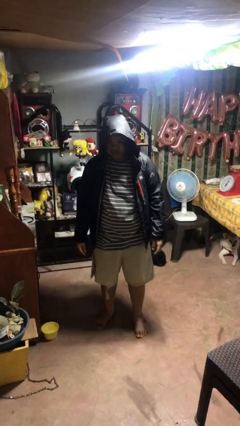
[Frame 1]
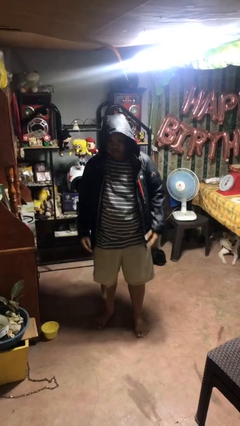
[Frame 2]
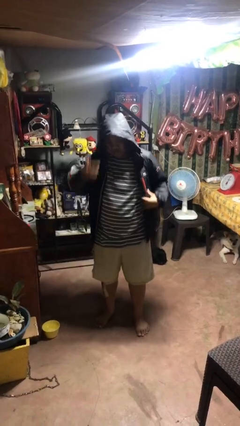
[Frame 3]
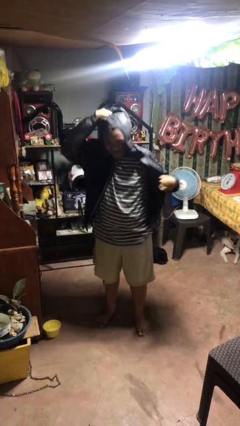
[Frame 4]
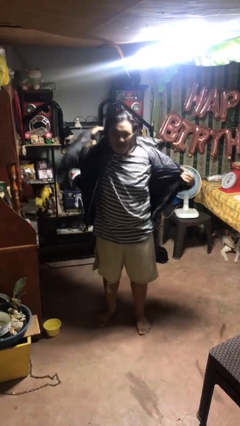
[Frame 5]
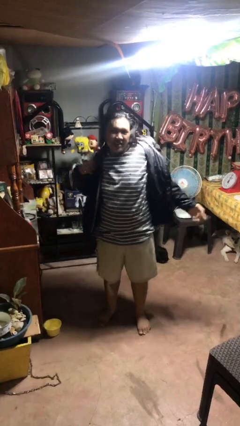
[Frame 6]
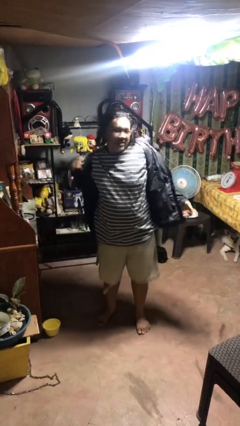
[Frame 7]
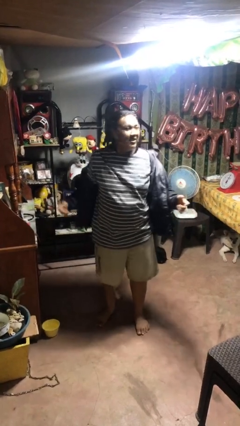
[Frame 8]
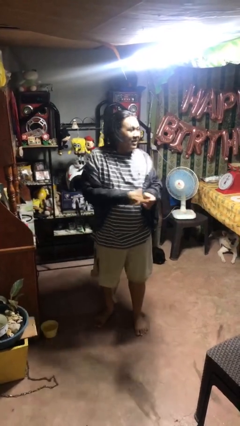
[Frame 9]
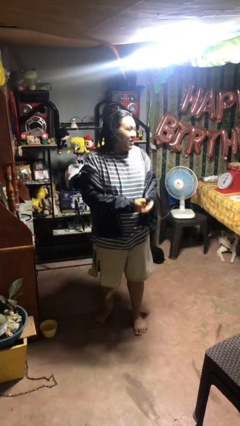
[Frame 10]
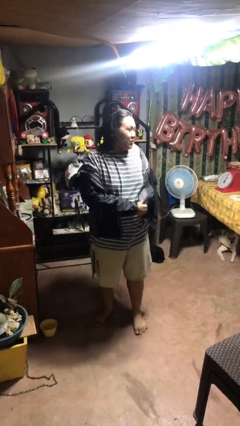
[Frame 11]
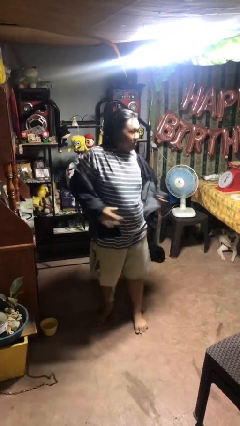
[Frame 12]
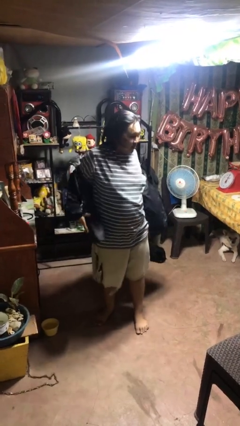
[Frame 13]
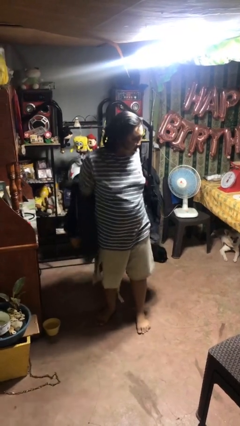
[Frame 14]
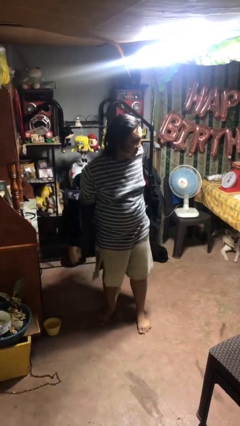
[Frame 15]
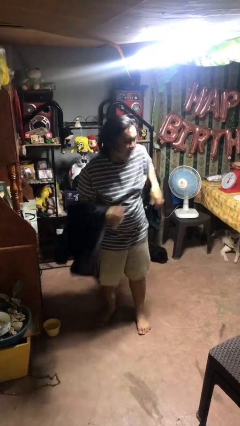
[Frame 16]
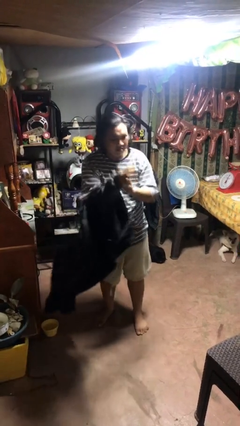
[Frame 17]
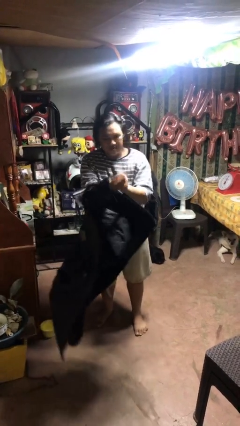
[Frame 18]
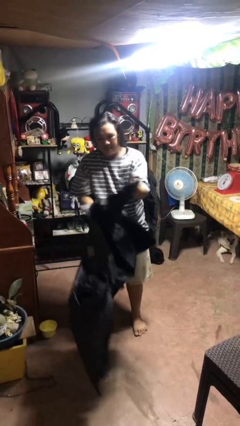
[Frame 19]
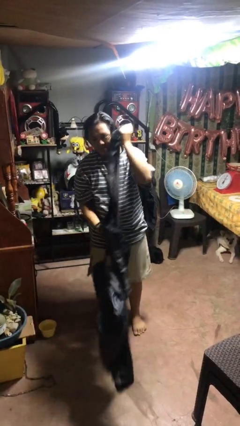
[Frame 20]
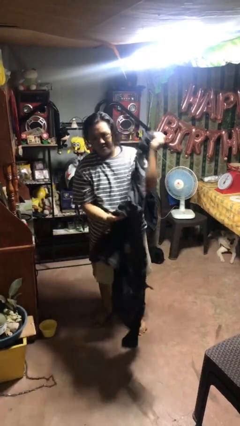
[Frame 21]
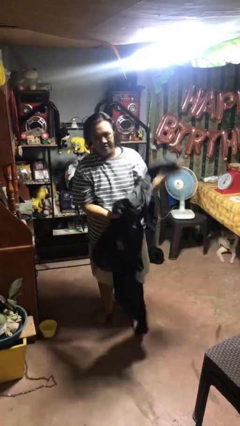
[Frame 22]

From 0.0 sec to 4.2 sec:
person takes off hoodie

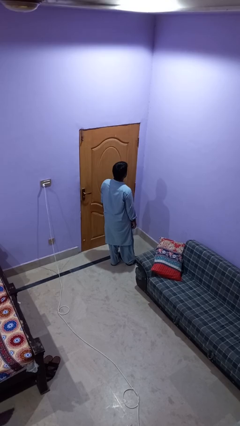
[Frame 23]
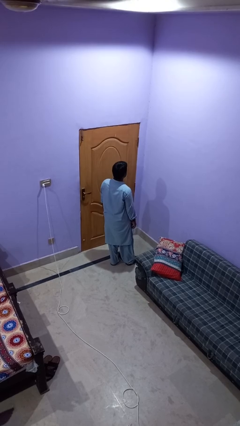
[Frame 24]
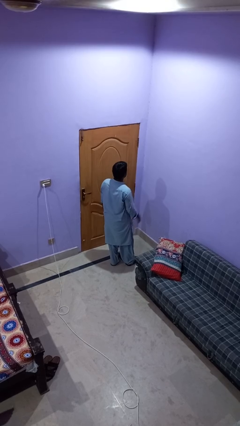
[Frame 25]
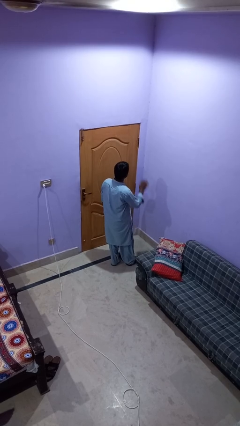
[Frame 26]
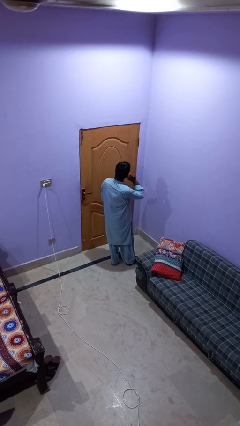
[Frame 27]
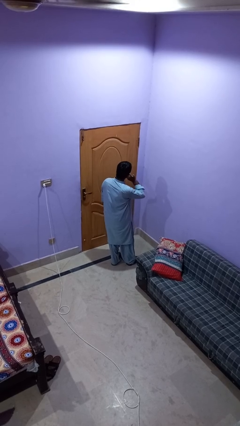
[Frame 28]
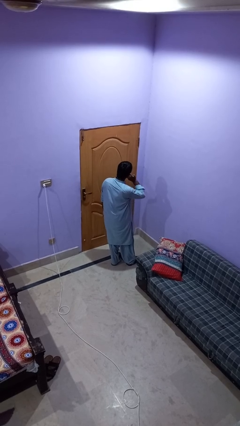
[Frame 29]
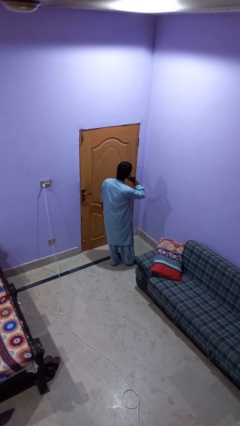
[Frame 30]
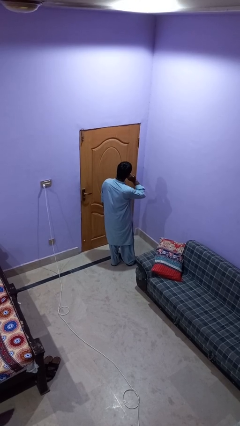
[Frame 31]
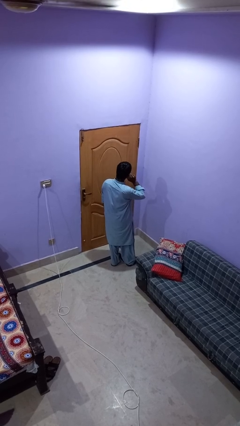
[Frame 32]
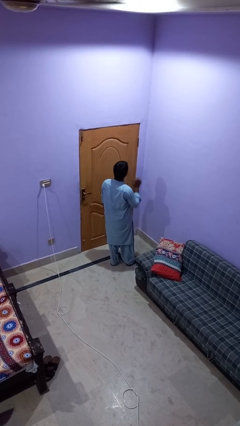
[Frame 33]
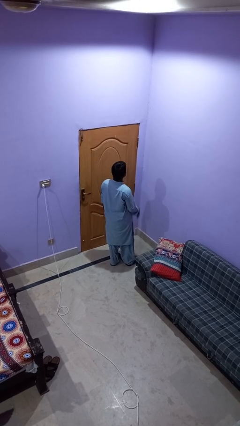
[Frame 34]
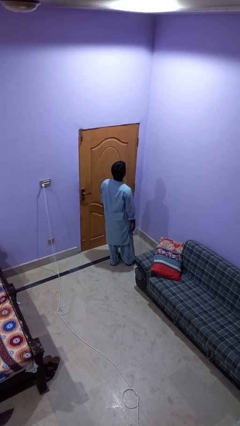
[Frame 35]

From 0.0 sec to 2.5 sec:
person gestures listen closely

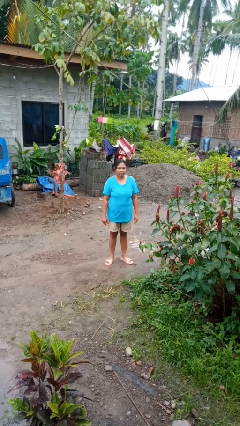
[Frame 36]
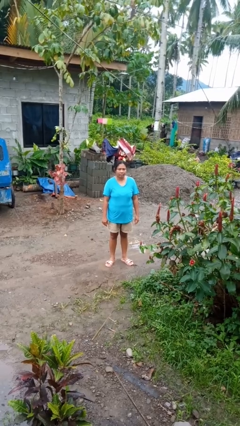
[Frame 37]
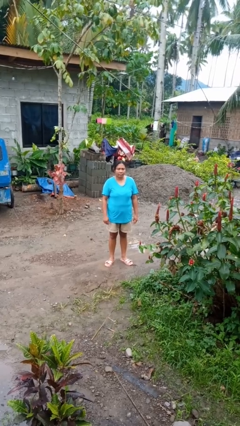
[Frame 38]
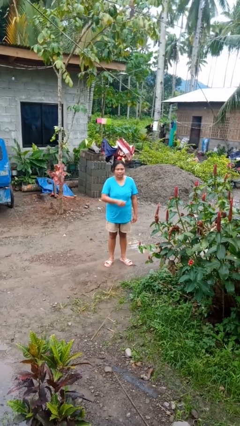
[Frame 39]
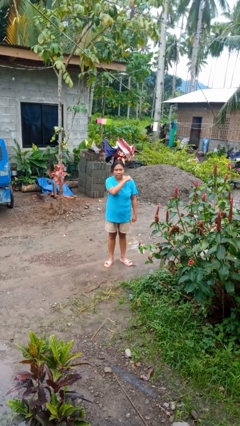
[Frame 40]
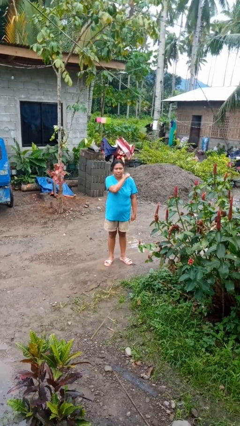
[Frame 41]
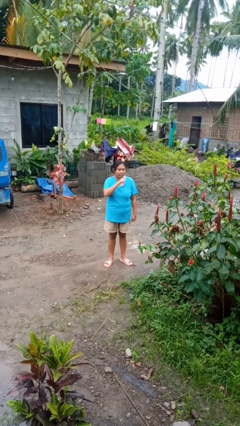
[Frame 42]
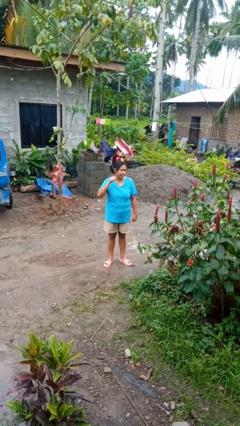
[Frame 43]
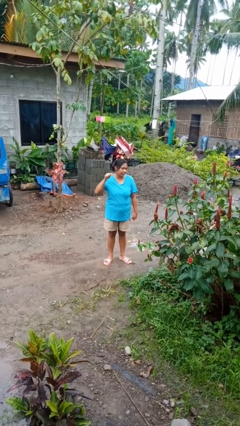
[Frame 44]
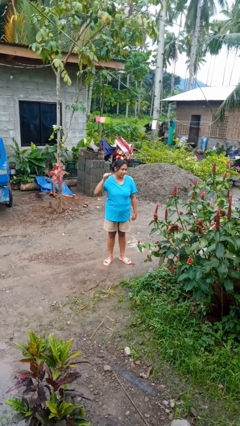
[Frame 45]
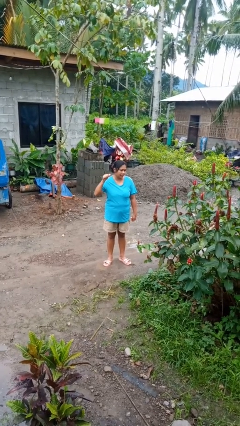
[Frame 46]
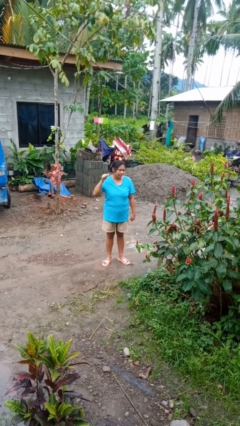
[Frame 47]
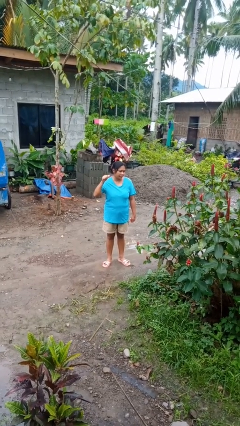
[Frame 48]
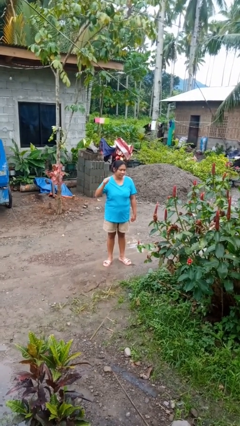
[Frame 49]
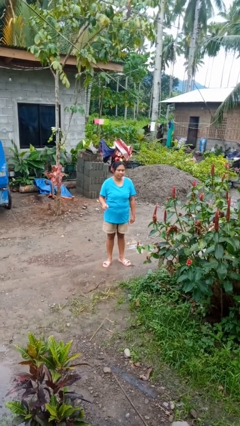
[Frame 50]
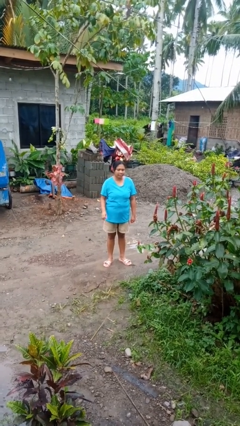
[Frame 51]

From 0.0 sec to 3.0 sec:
person gestures cut

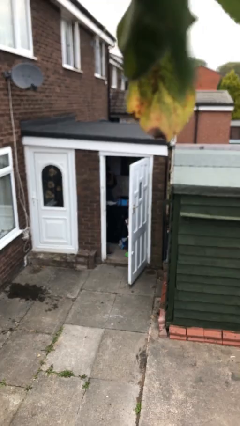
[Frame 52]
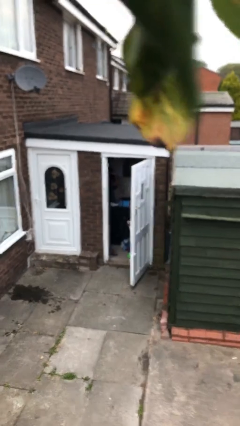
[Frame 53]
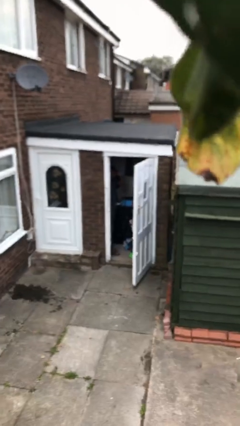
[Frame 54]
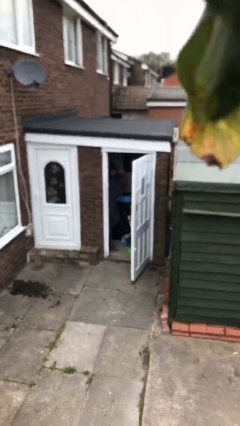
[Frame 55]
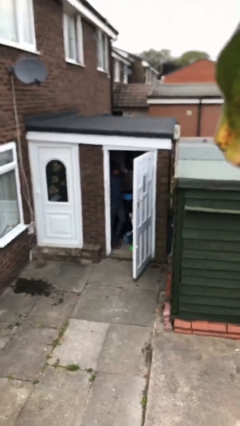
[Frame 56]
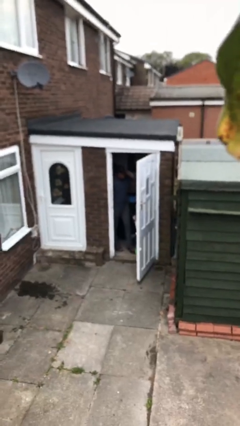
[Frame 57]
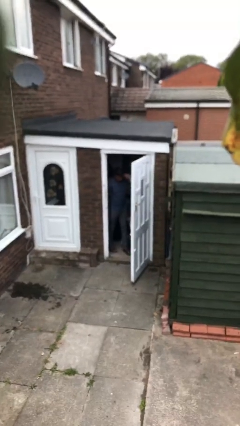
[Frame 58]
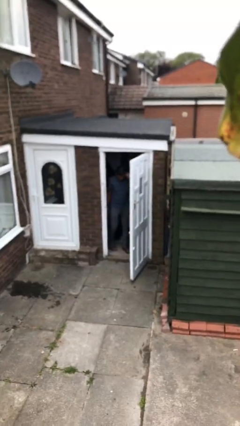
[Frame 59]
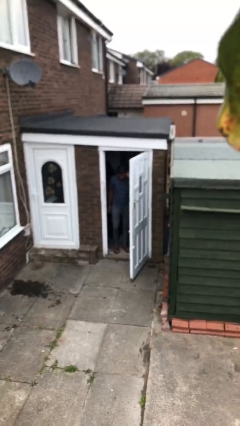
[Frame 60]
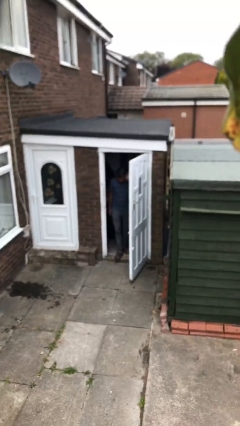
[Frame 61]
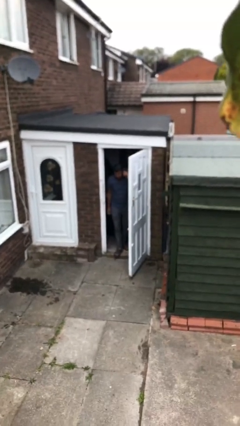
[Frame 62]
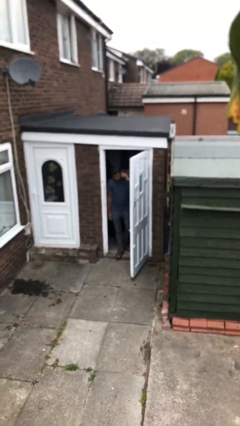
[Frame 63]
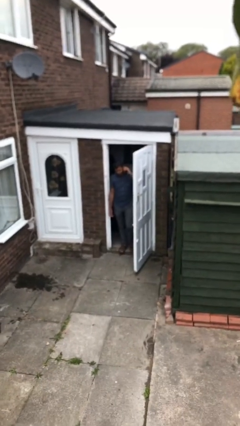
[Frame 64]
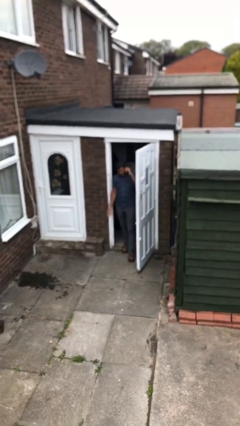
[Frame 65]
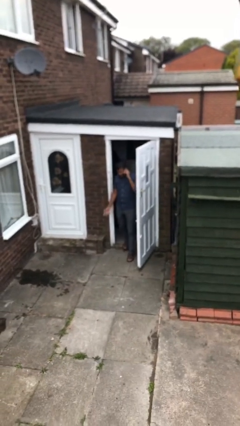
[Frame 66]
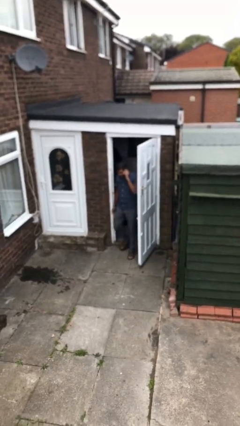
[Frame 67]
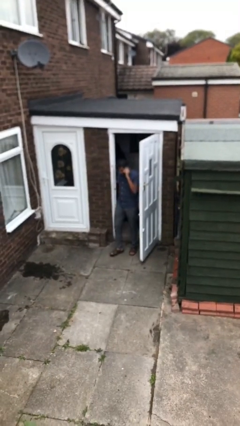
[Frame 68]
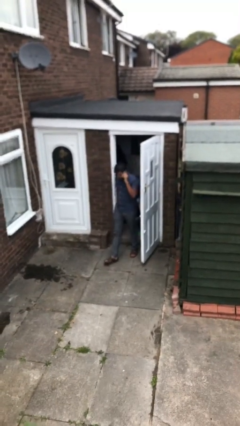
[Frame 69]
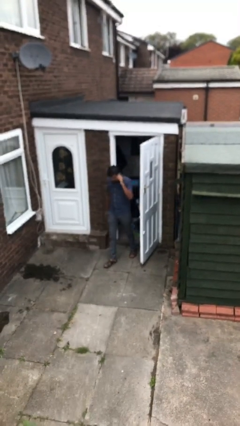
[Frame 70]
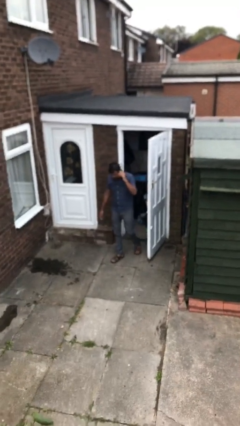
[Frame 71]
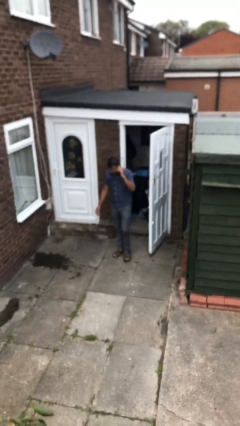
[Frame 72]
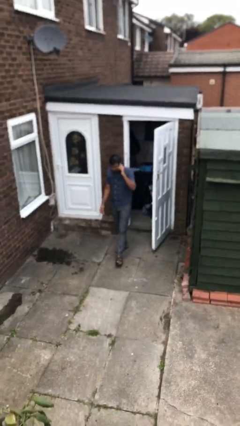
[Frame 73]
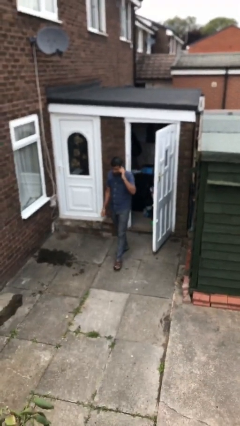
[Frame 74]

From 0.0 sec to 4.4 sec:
person enters scene through structure

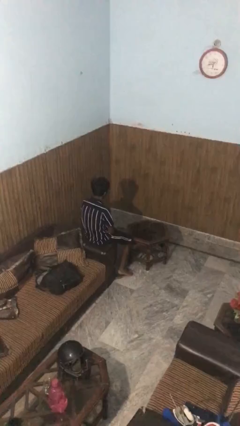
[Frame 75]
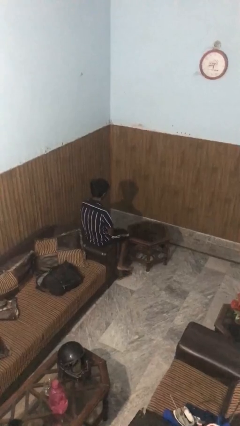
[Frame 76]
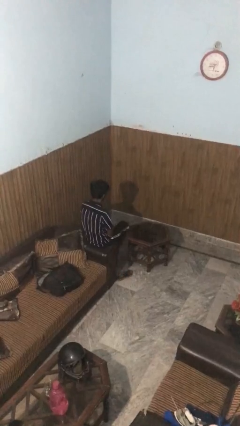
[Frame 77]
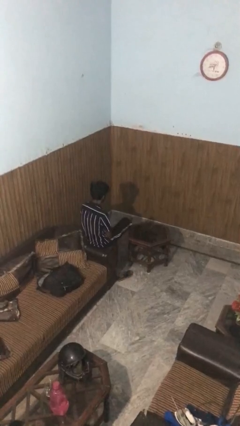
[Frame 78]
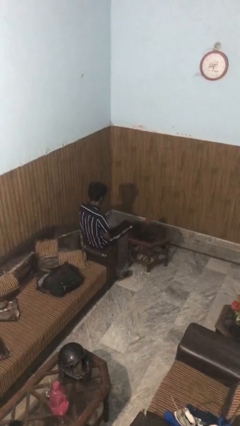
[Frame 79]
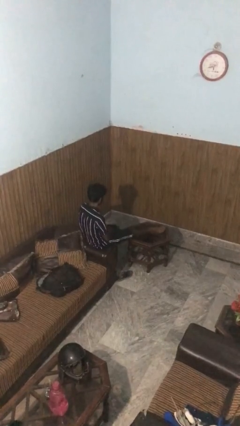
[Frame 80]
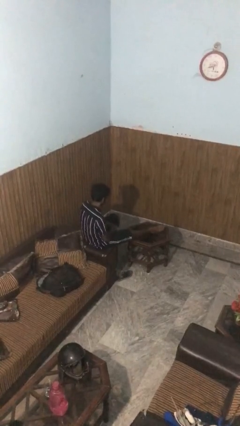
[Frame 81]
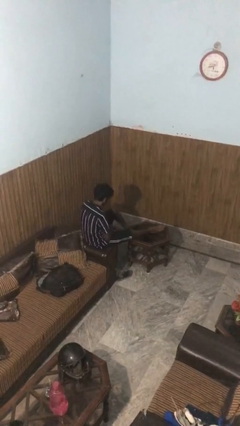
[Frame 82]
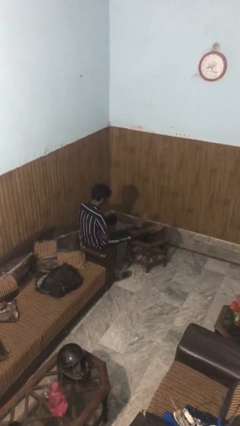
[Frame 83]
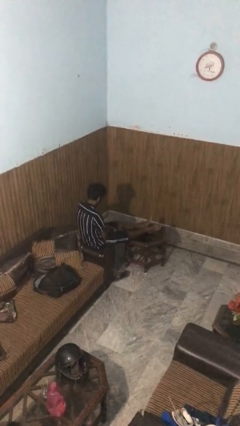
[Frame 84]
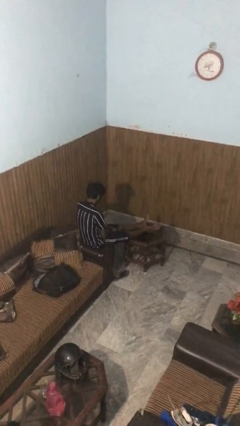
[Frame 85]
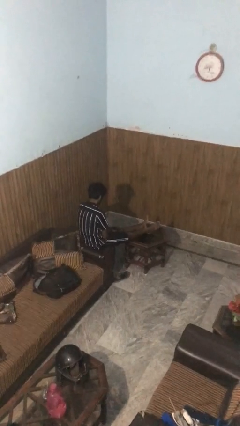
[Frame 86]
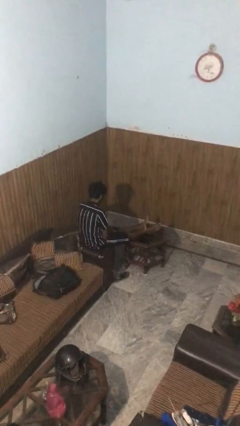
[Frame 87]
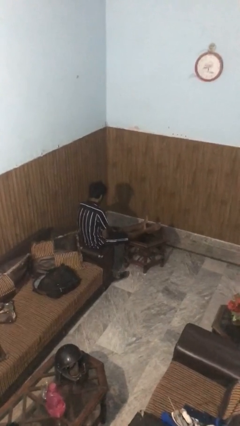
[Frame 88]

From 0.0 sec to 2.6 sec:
person puts feet up

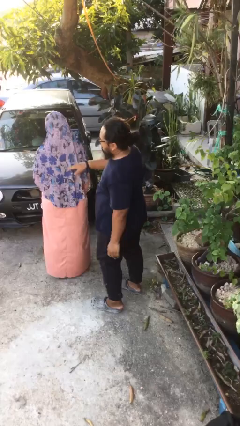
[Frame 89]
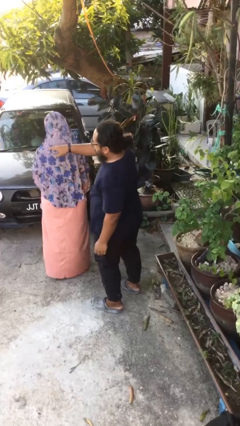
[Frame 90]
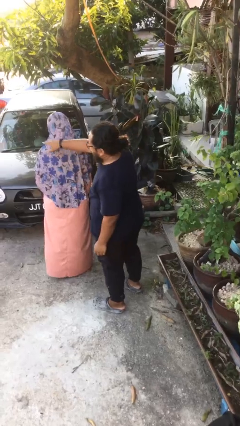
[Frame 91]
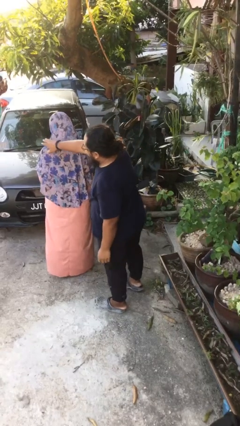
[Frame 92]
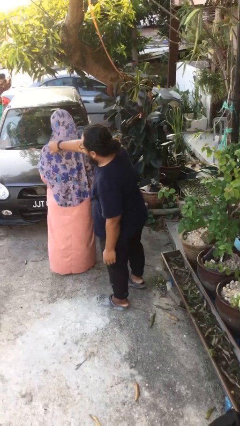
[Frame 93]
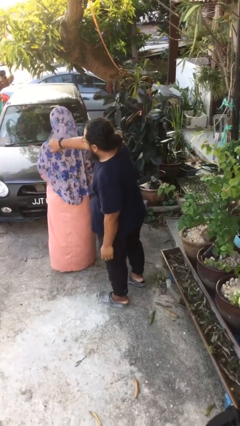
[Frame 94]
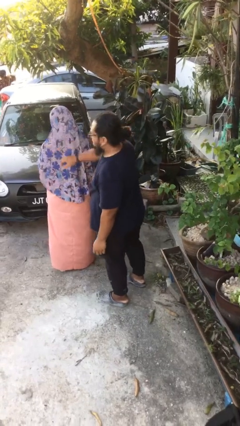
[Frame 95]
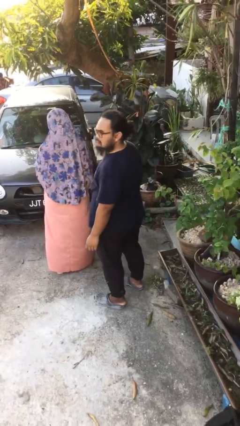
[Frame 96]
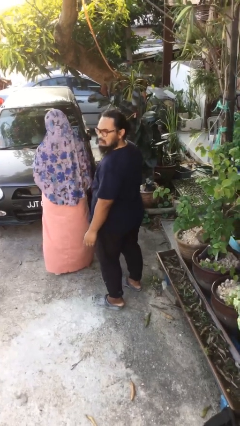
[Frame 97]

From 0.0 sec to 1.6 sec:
person touches back of person
